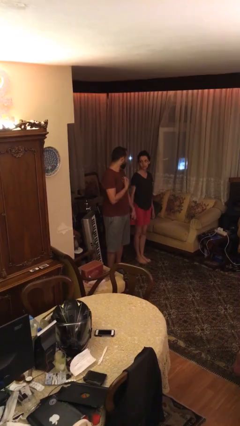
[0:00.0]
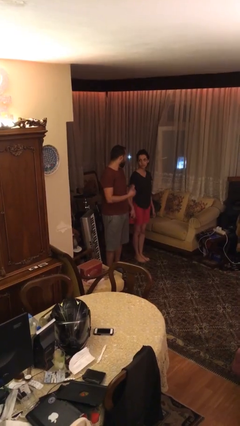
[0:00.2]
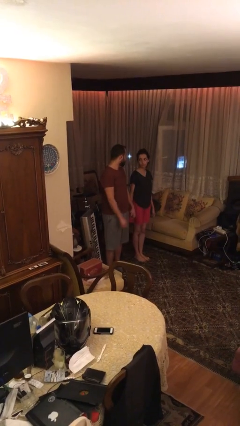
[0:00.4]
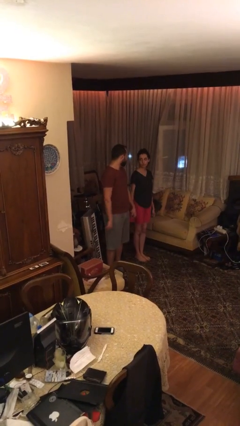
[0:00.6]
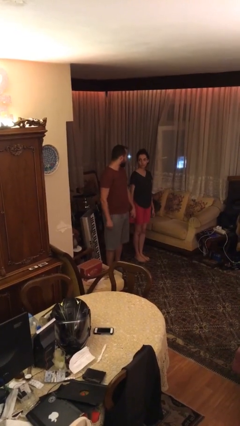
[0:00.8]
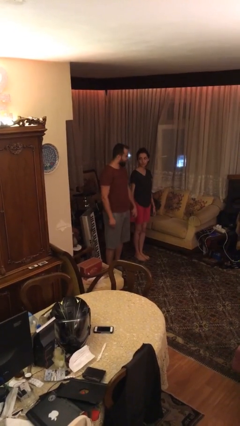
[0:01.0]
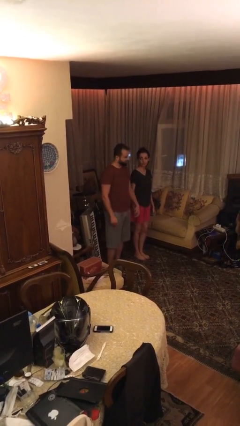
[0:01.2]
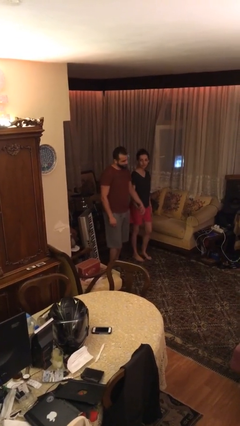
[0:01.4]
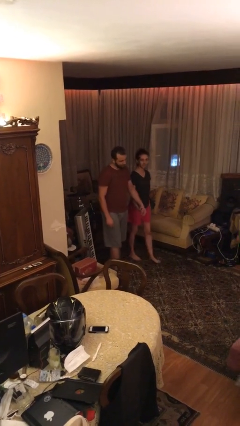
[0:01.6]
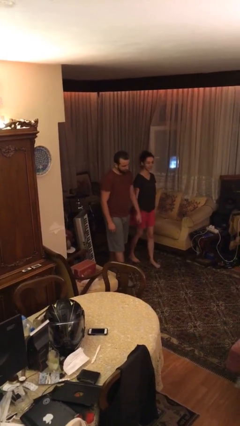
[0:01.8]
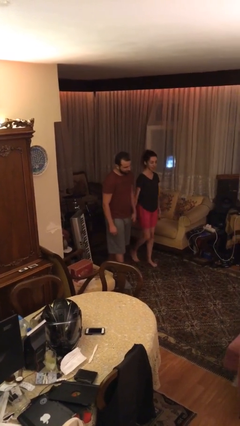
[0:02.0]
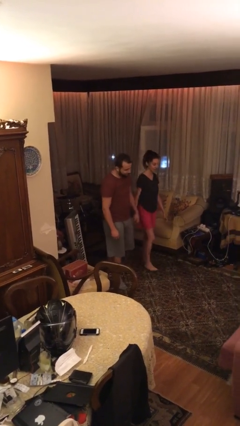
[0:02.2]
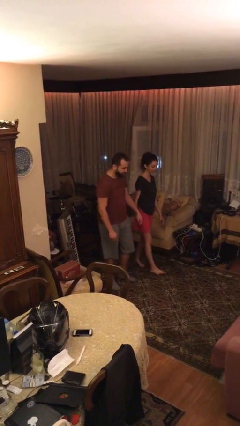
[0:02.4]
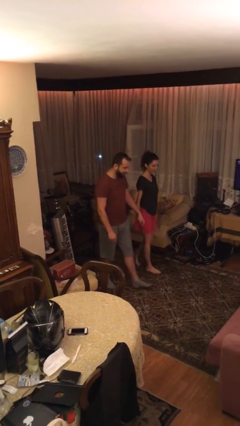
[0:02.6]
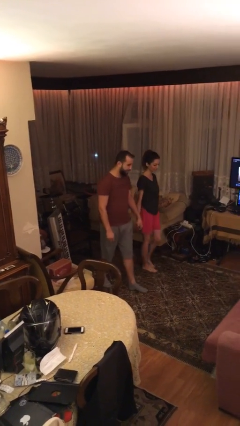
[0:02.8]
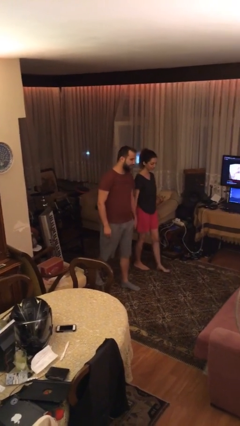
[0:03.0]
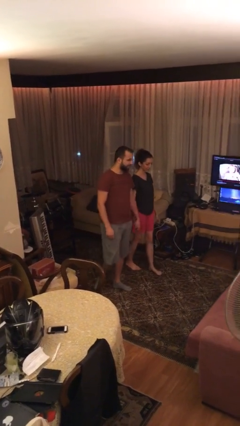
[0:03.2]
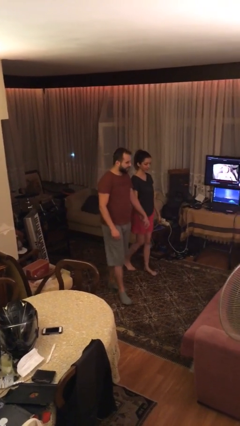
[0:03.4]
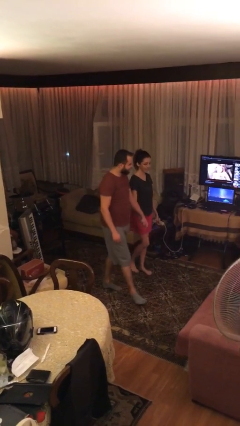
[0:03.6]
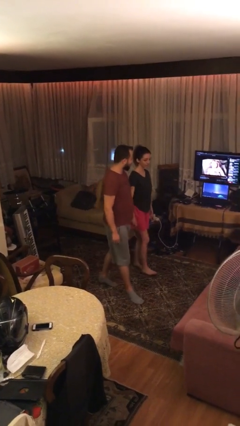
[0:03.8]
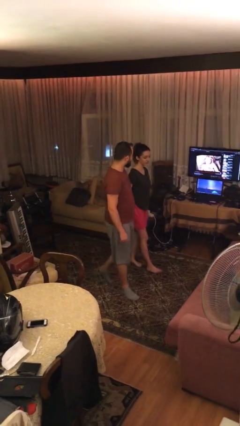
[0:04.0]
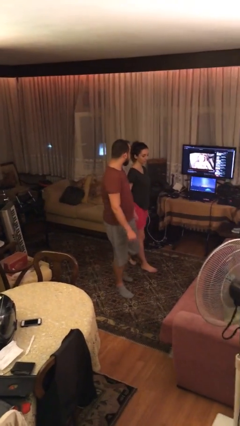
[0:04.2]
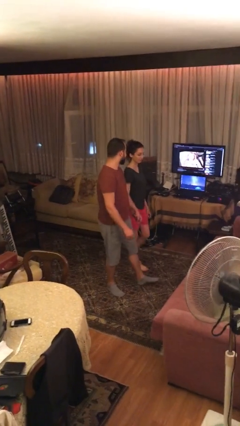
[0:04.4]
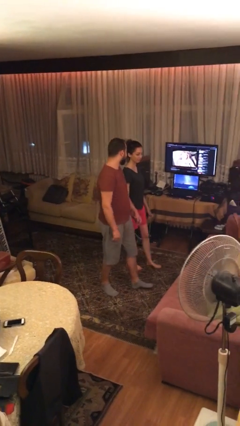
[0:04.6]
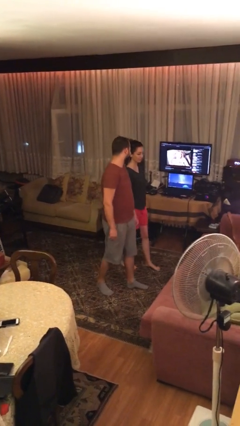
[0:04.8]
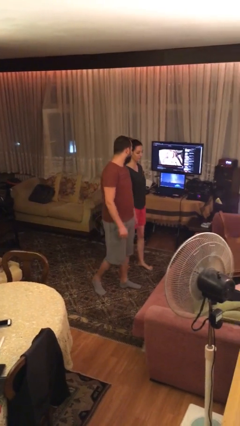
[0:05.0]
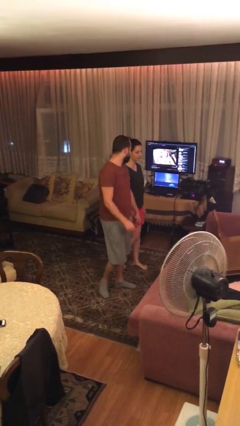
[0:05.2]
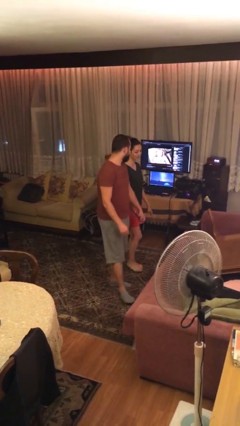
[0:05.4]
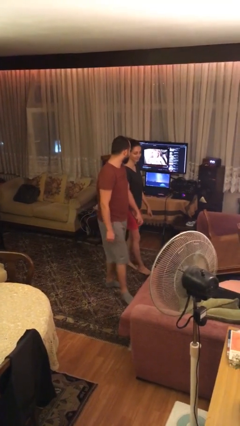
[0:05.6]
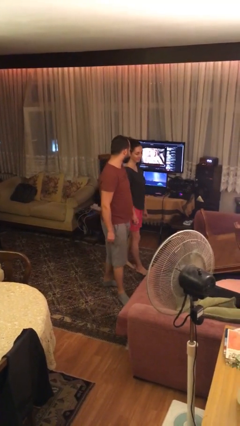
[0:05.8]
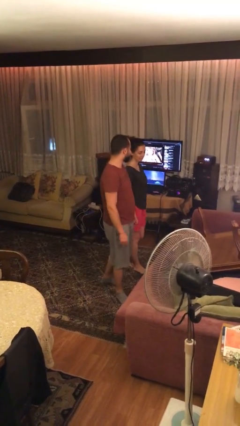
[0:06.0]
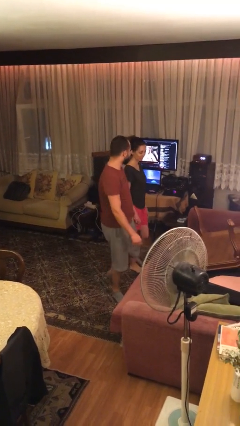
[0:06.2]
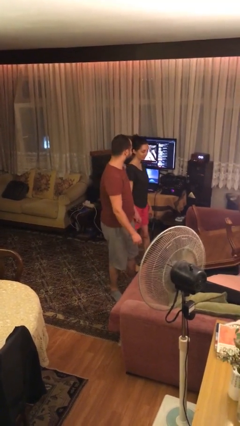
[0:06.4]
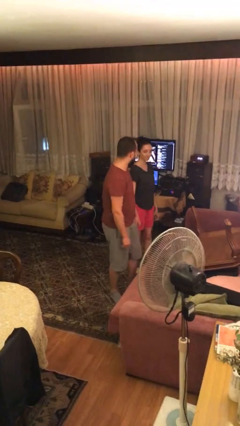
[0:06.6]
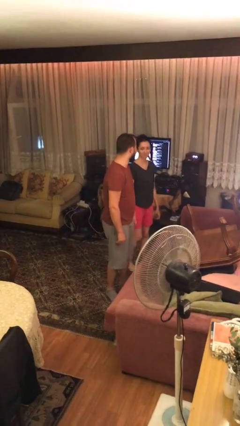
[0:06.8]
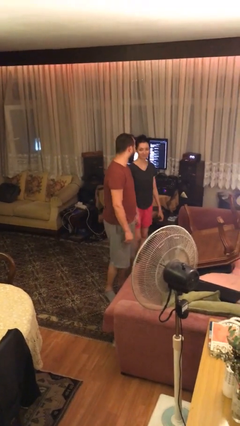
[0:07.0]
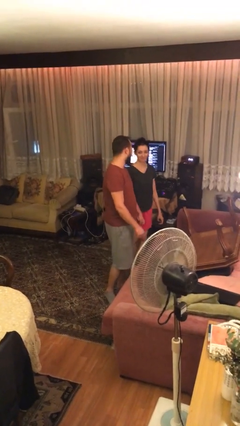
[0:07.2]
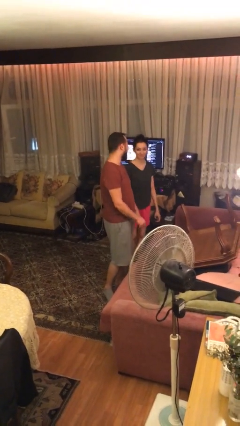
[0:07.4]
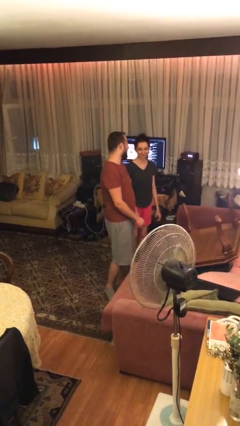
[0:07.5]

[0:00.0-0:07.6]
person holds hand

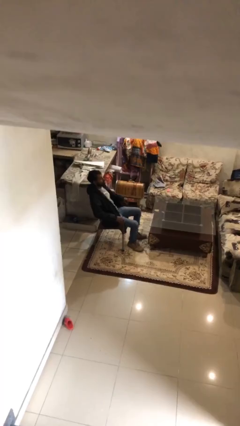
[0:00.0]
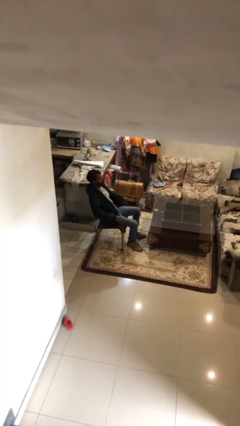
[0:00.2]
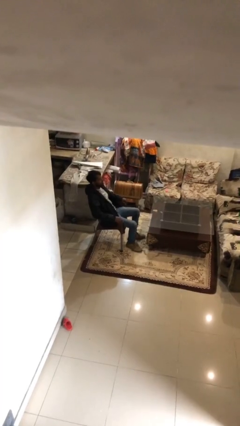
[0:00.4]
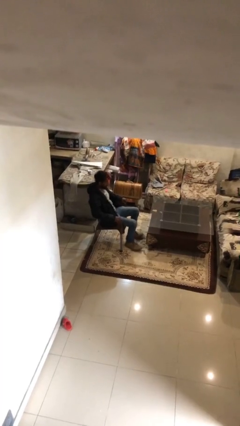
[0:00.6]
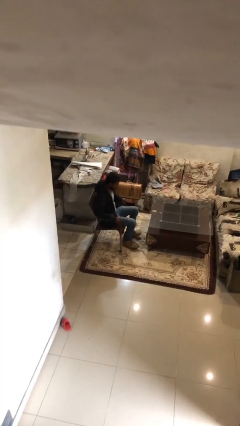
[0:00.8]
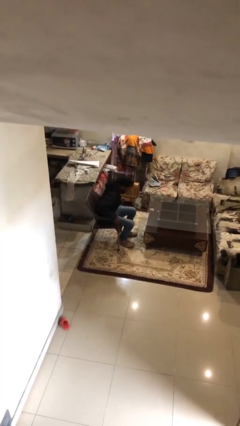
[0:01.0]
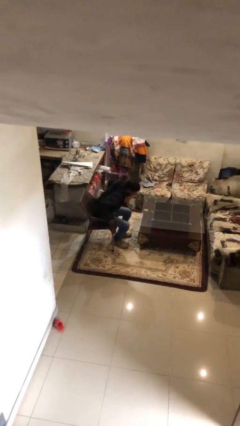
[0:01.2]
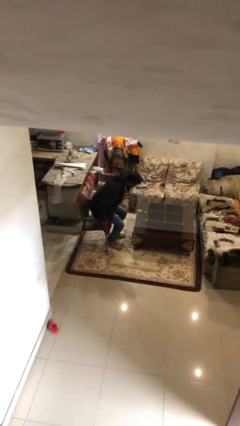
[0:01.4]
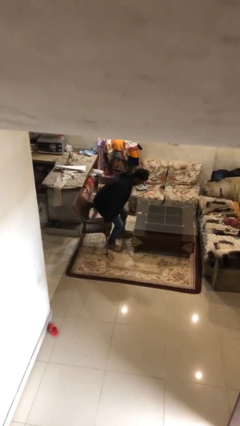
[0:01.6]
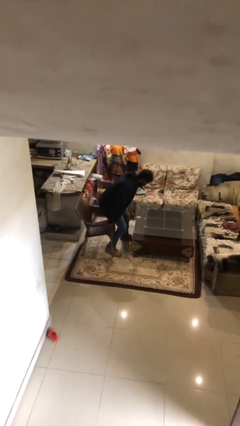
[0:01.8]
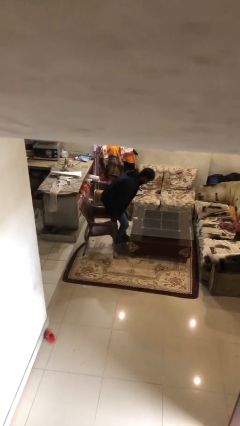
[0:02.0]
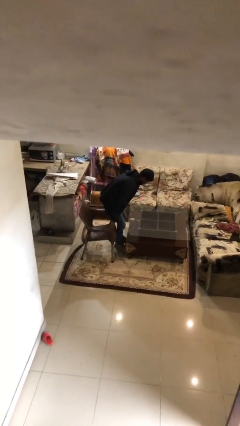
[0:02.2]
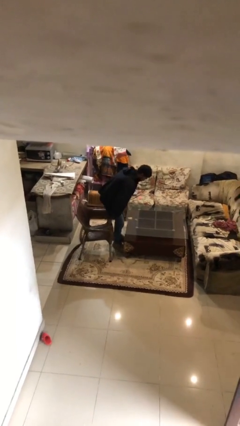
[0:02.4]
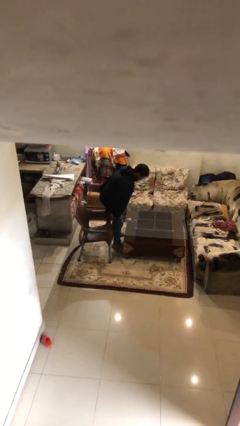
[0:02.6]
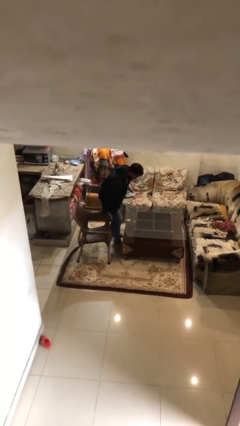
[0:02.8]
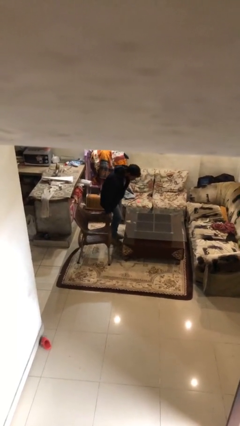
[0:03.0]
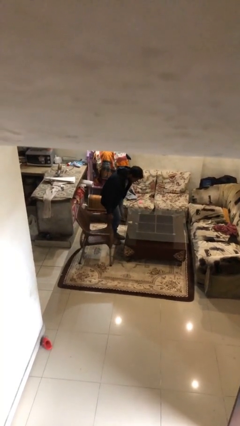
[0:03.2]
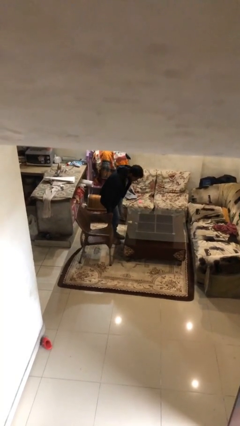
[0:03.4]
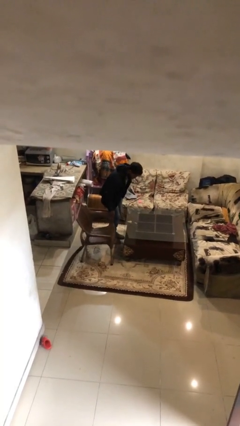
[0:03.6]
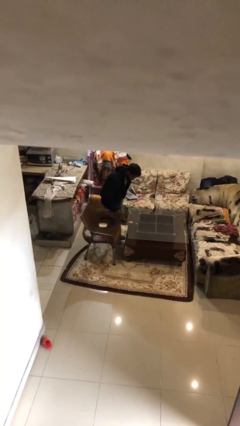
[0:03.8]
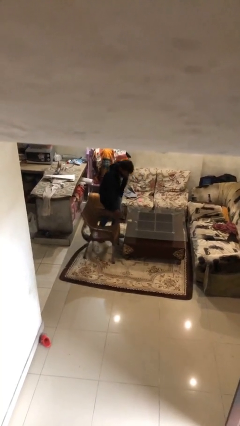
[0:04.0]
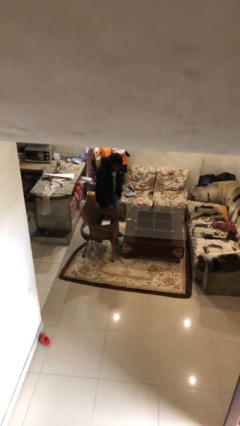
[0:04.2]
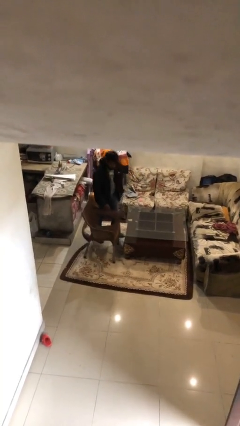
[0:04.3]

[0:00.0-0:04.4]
person stands up

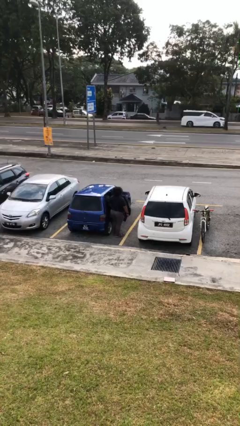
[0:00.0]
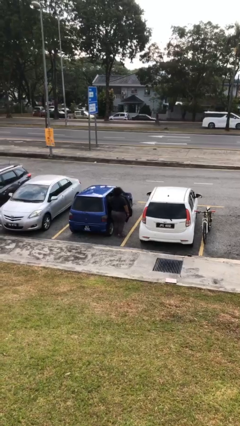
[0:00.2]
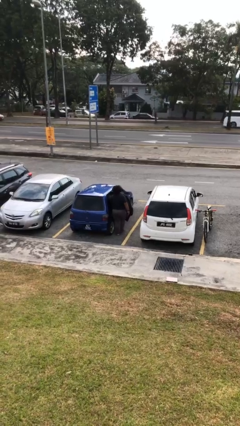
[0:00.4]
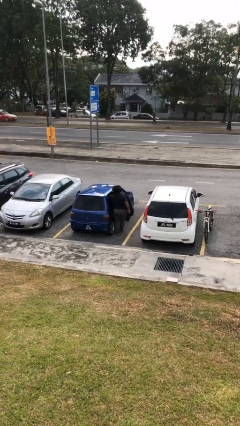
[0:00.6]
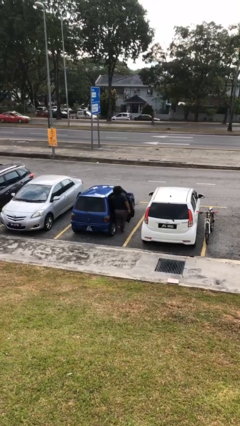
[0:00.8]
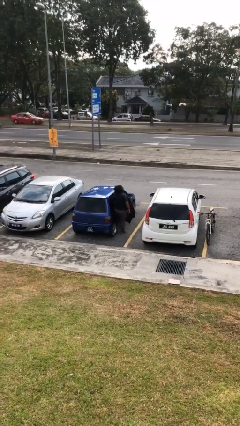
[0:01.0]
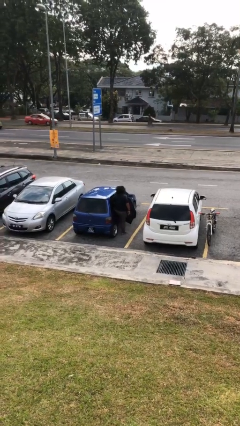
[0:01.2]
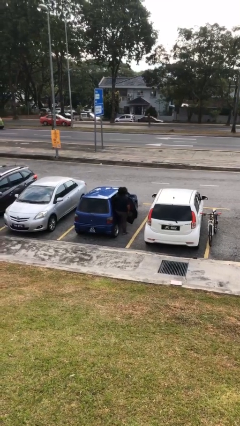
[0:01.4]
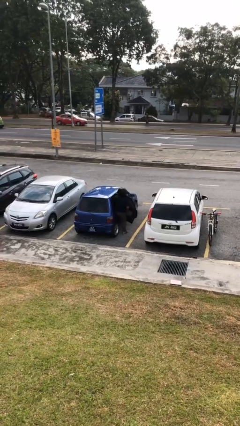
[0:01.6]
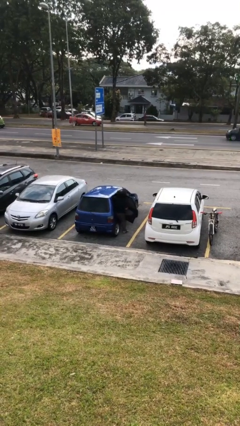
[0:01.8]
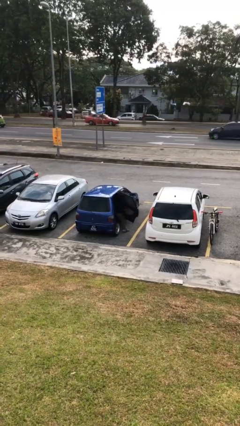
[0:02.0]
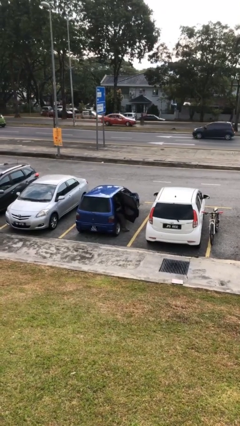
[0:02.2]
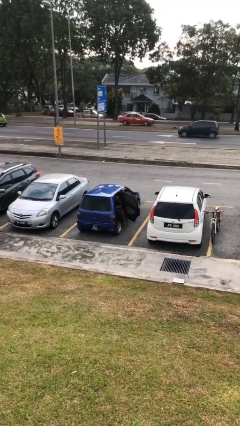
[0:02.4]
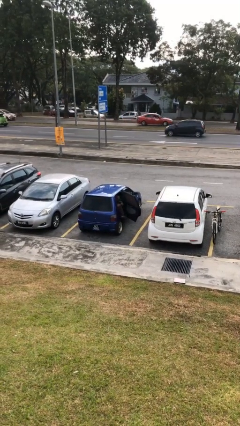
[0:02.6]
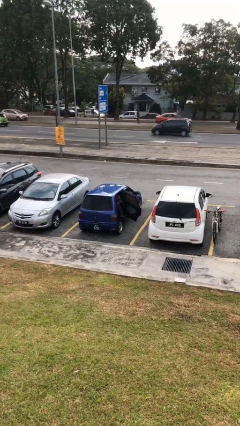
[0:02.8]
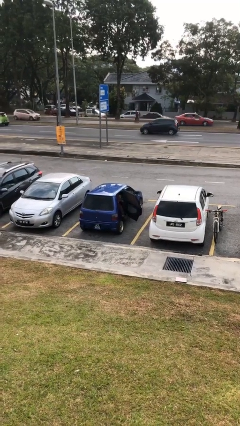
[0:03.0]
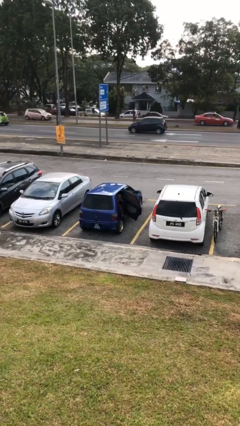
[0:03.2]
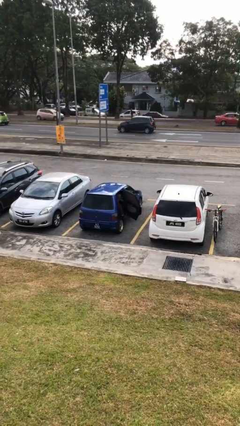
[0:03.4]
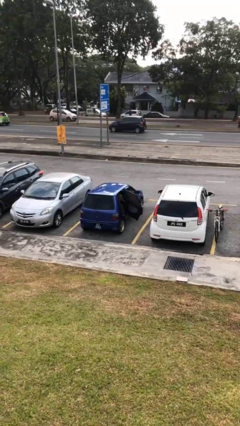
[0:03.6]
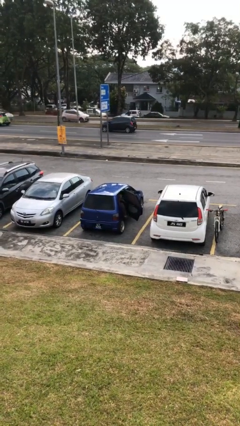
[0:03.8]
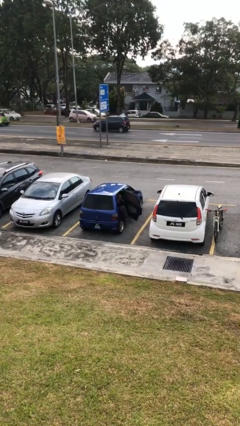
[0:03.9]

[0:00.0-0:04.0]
person enters car

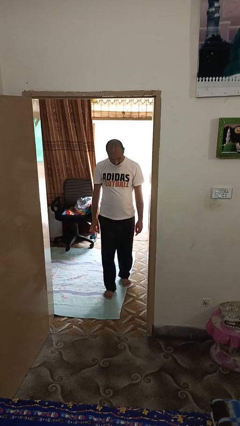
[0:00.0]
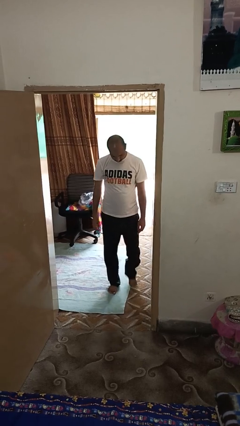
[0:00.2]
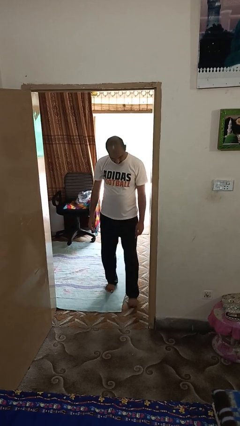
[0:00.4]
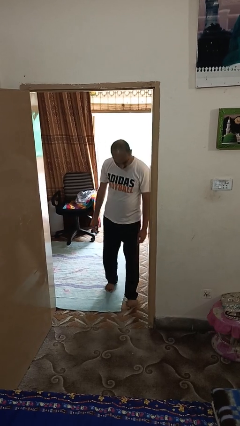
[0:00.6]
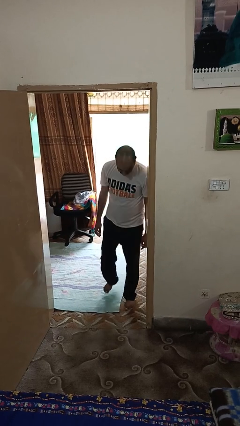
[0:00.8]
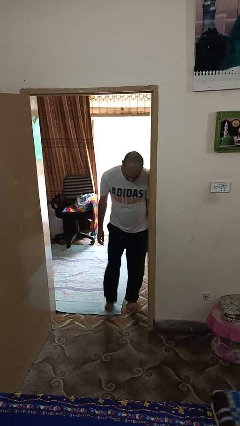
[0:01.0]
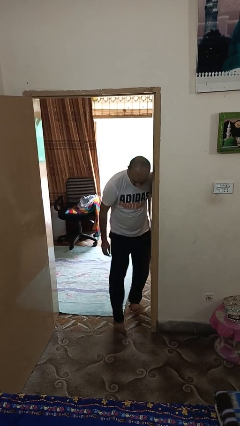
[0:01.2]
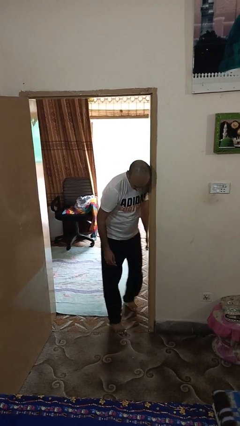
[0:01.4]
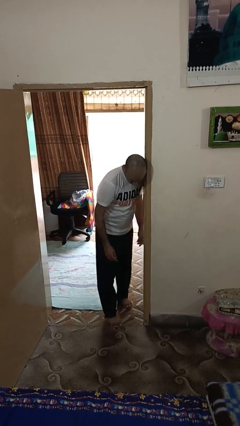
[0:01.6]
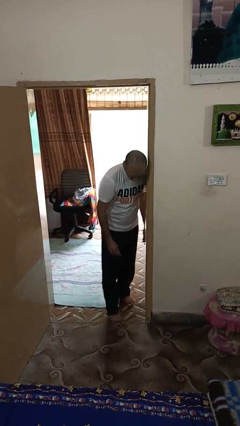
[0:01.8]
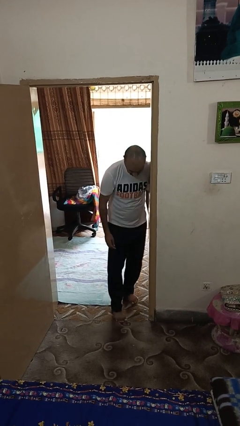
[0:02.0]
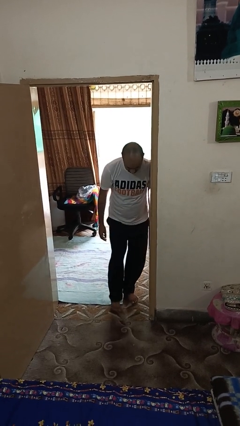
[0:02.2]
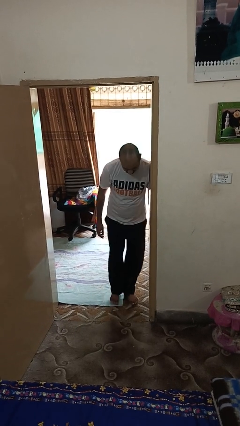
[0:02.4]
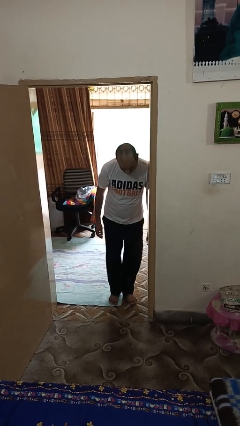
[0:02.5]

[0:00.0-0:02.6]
person bumps into wall
